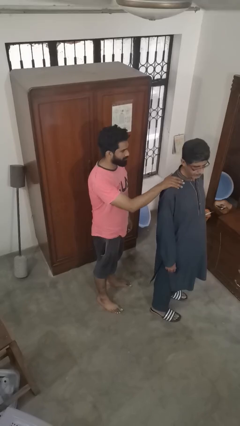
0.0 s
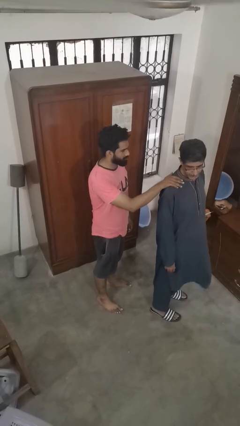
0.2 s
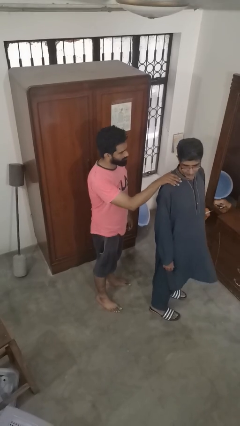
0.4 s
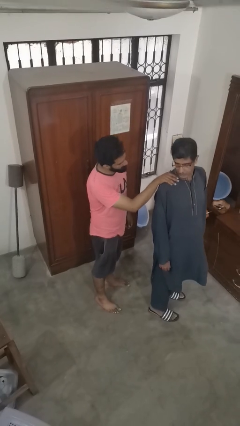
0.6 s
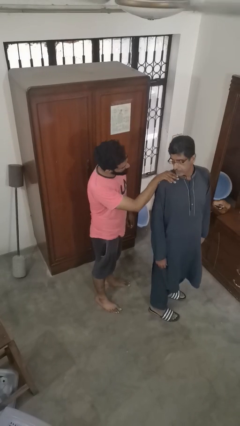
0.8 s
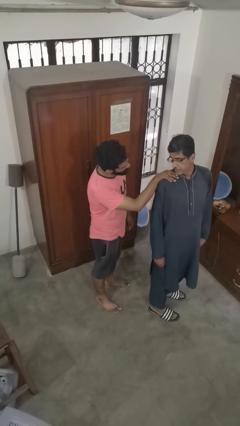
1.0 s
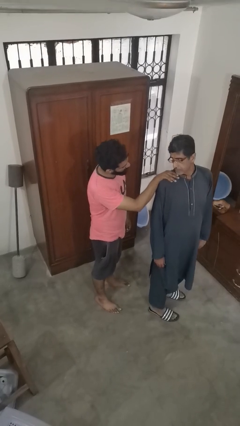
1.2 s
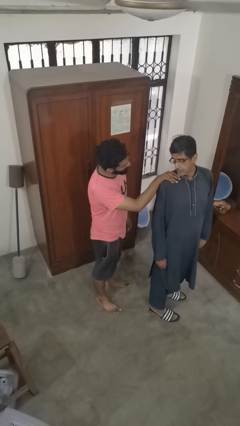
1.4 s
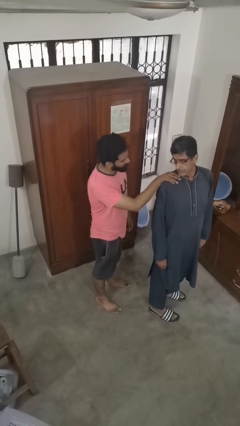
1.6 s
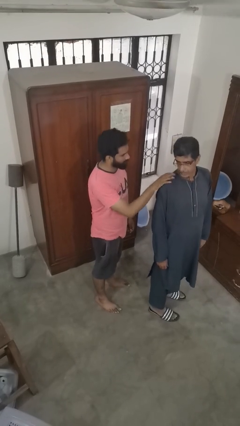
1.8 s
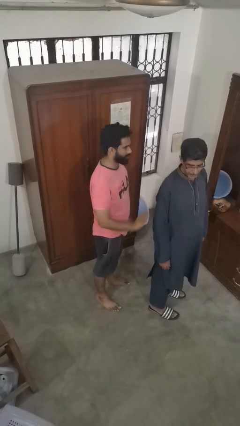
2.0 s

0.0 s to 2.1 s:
person spins person around

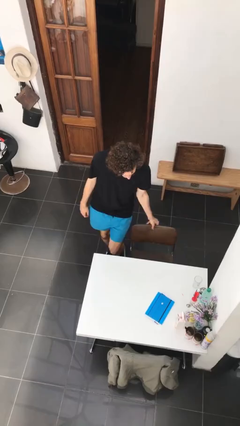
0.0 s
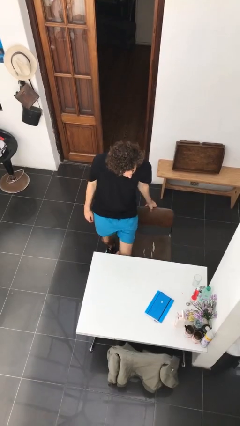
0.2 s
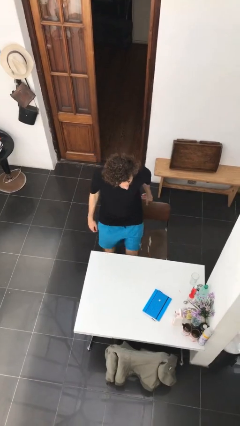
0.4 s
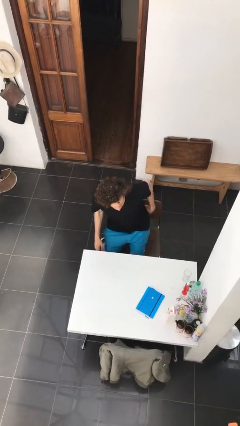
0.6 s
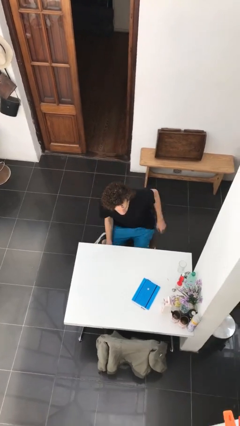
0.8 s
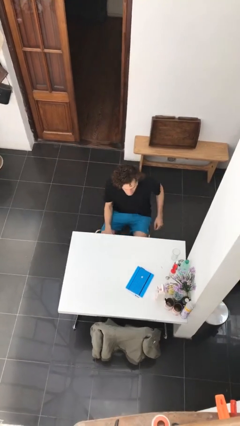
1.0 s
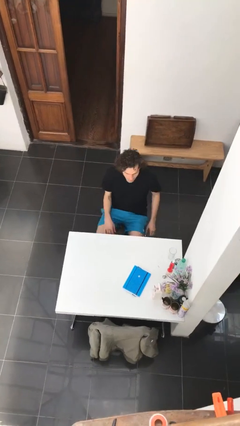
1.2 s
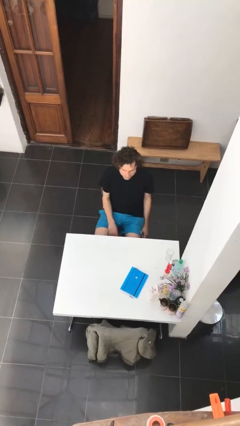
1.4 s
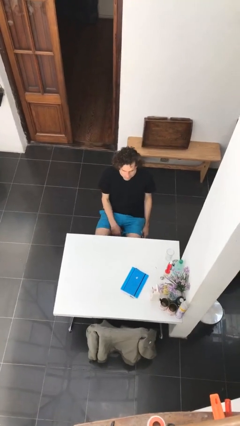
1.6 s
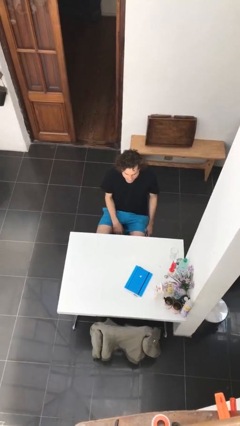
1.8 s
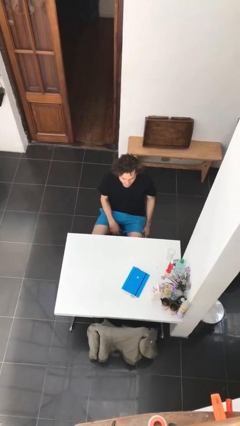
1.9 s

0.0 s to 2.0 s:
person sits down

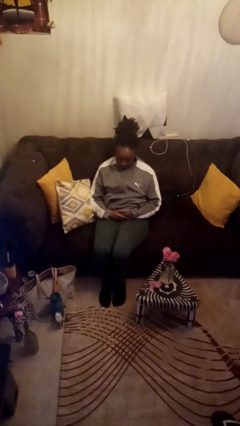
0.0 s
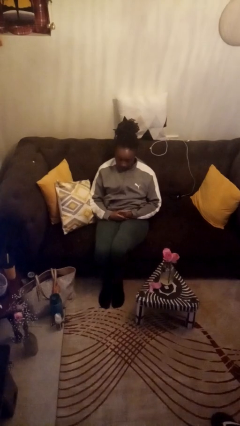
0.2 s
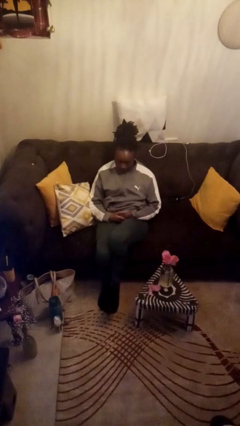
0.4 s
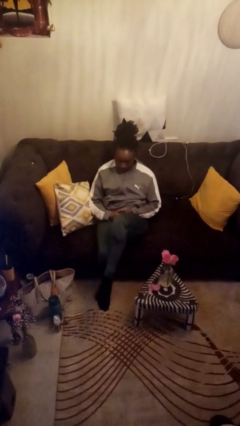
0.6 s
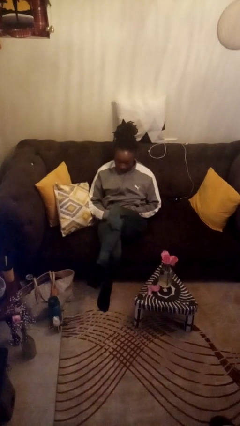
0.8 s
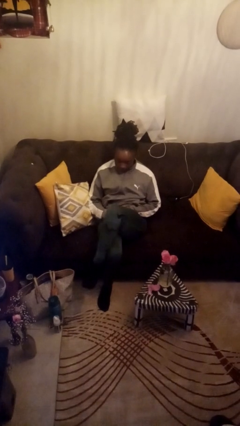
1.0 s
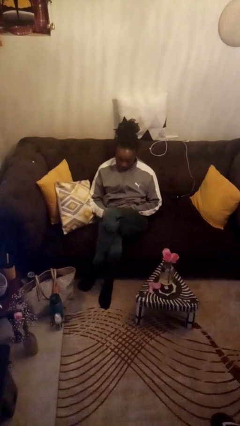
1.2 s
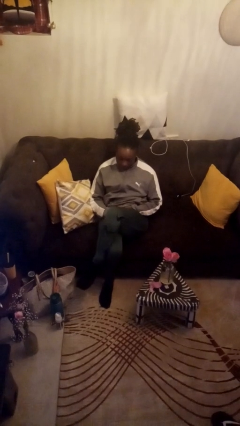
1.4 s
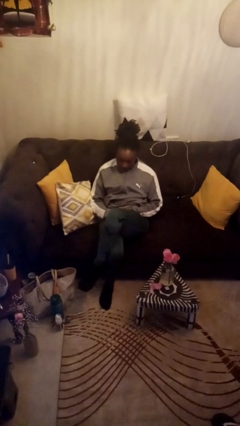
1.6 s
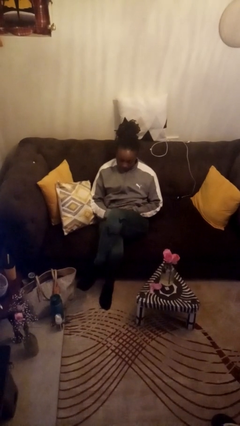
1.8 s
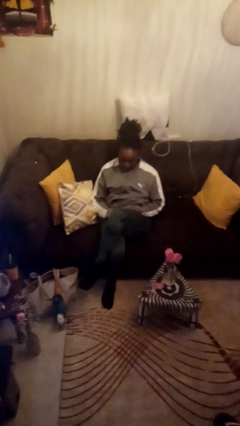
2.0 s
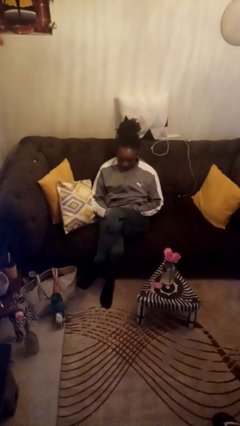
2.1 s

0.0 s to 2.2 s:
person crosses legs

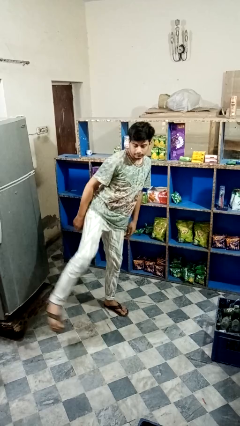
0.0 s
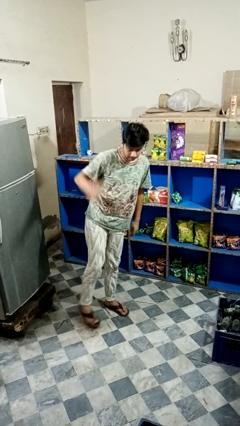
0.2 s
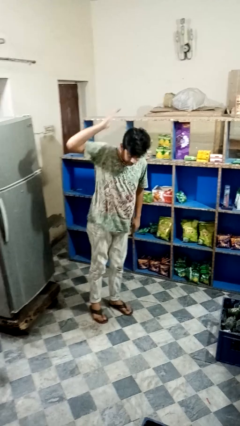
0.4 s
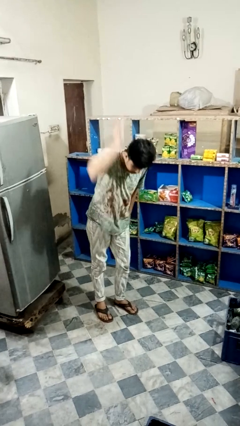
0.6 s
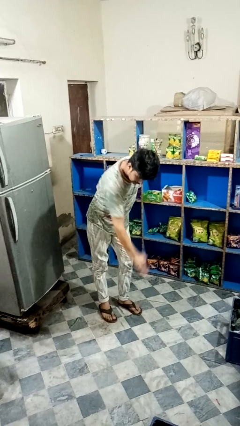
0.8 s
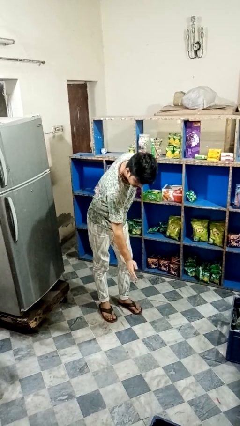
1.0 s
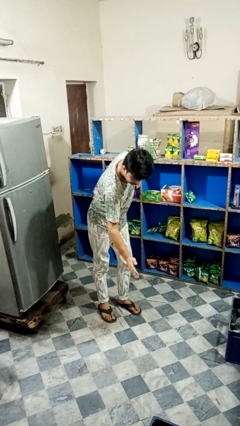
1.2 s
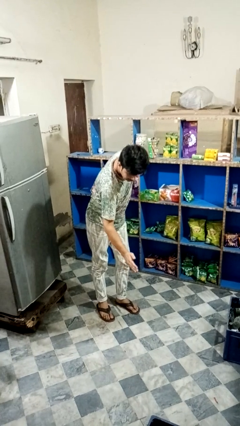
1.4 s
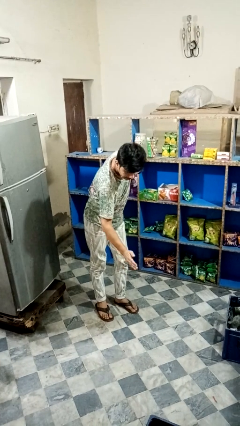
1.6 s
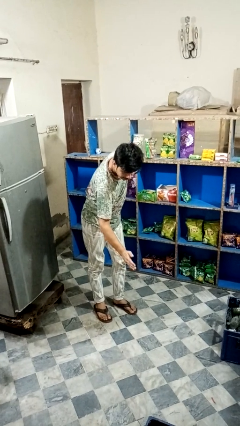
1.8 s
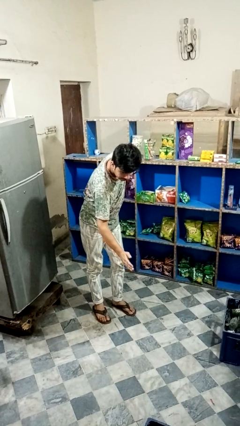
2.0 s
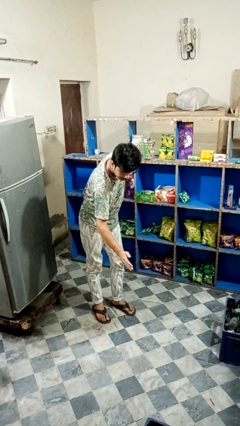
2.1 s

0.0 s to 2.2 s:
person karate chop

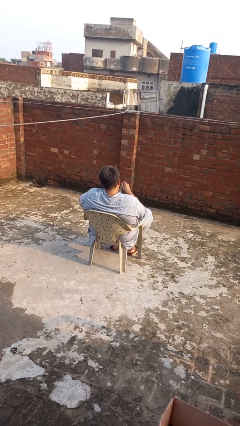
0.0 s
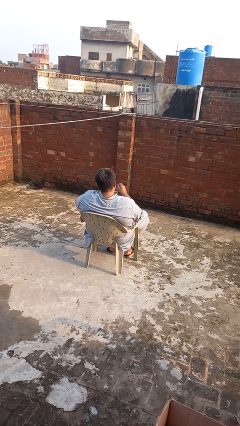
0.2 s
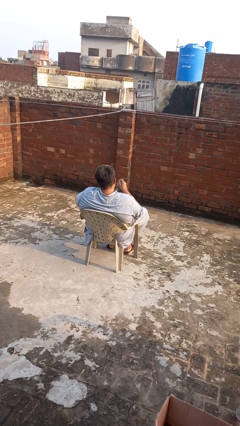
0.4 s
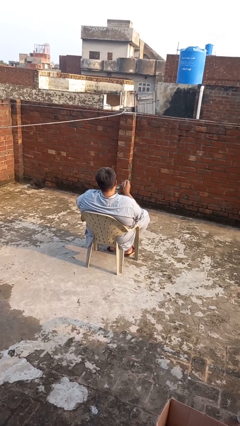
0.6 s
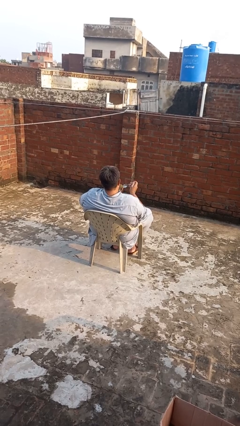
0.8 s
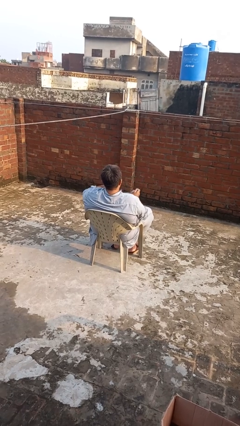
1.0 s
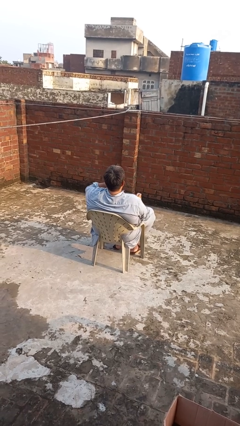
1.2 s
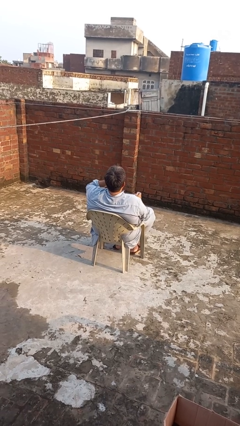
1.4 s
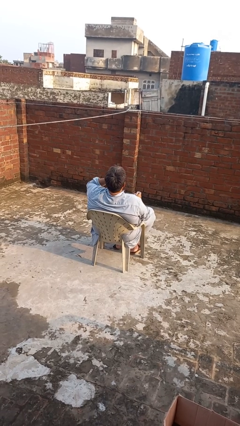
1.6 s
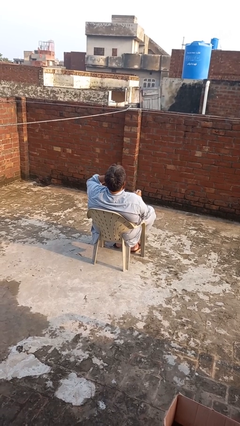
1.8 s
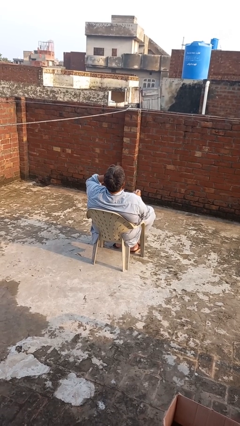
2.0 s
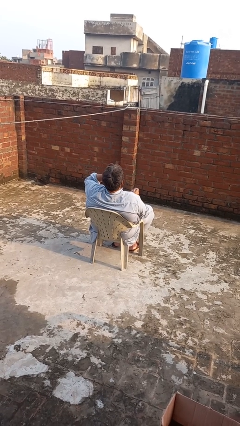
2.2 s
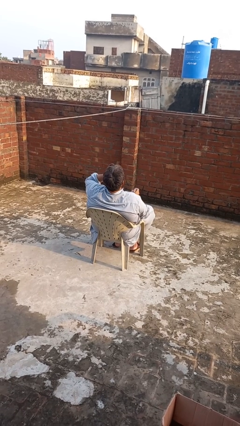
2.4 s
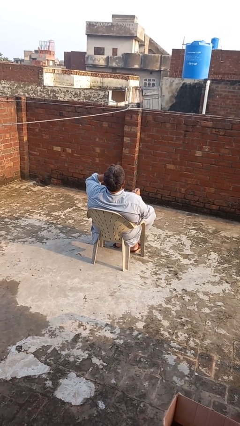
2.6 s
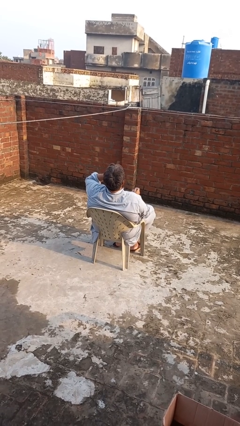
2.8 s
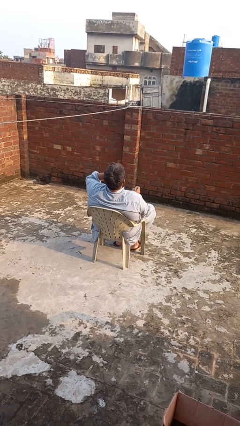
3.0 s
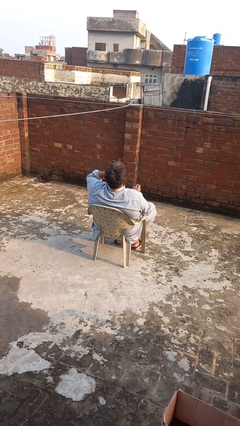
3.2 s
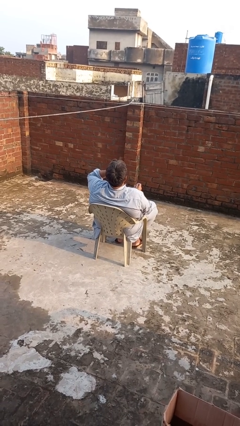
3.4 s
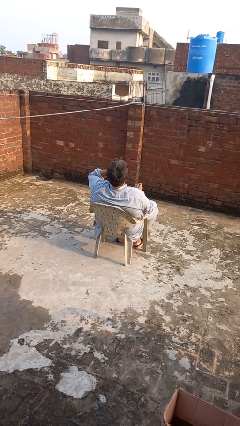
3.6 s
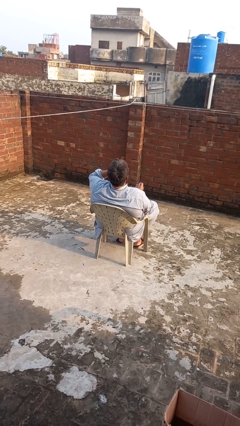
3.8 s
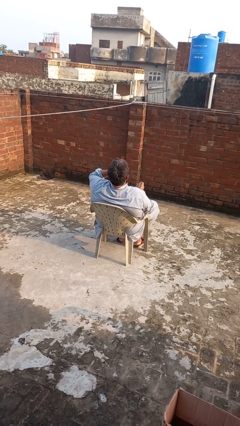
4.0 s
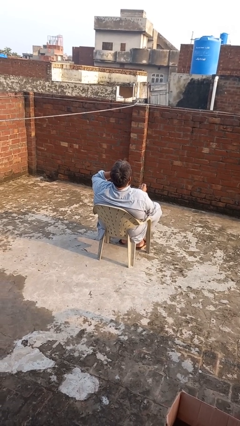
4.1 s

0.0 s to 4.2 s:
person drinks from mug

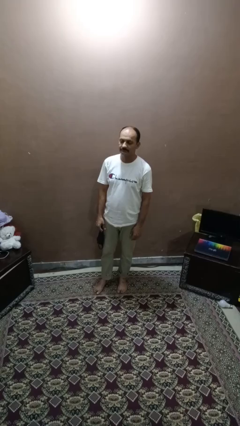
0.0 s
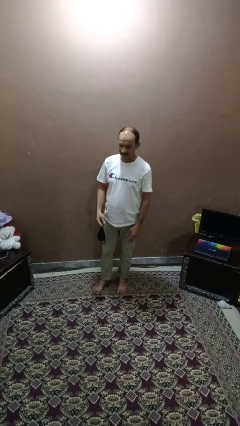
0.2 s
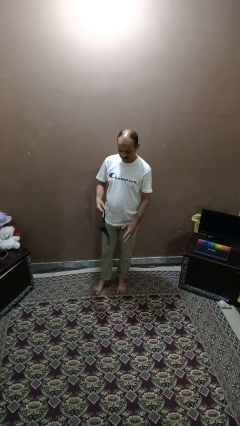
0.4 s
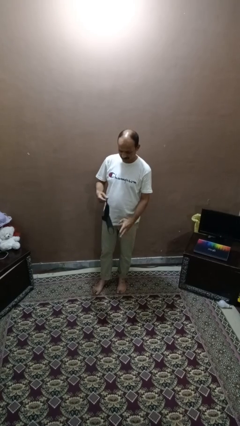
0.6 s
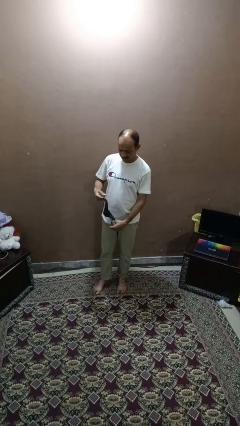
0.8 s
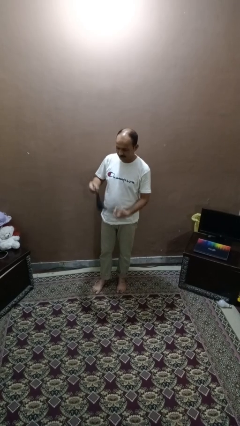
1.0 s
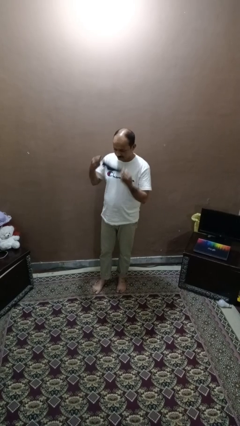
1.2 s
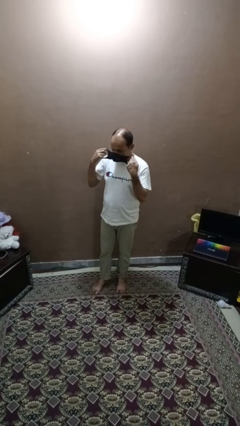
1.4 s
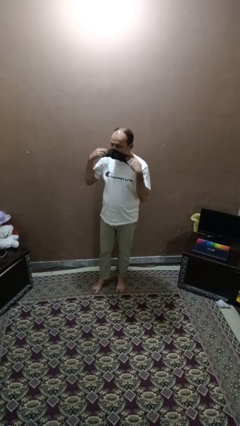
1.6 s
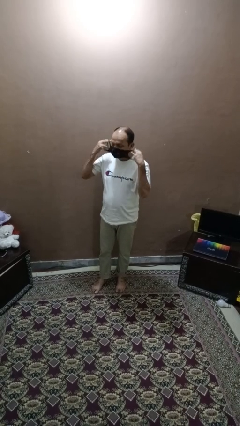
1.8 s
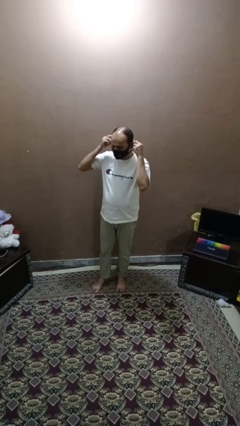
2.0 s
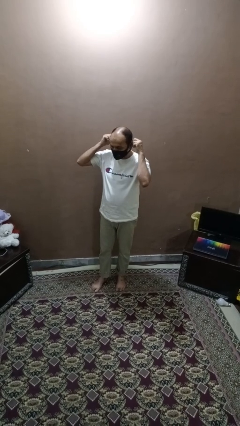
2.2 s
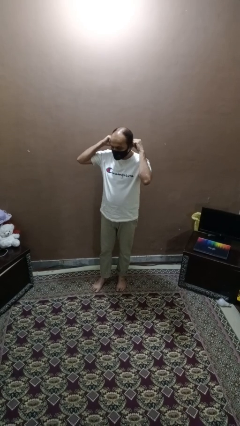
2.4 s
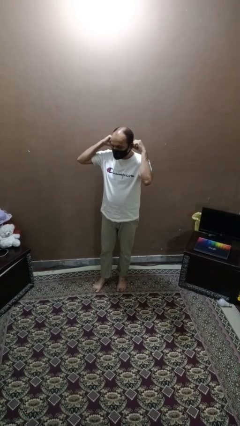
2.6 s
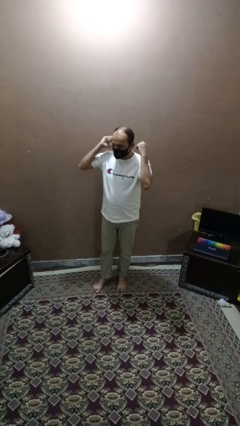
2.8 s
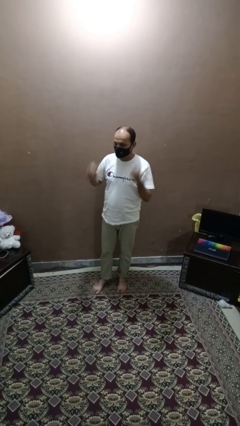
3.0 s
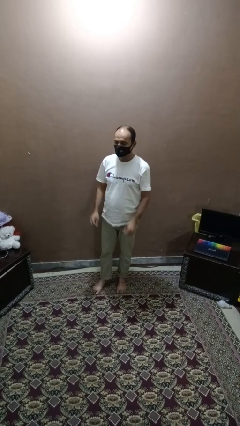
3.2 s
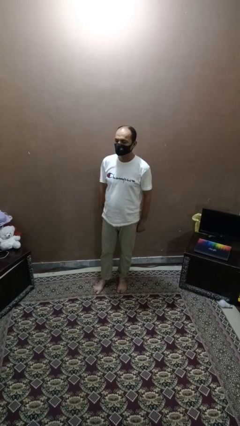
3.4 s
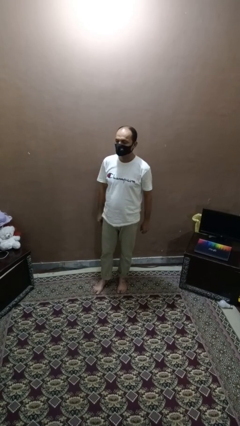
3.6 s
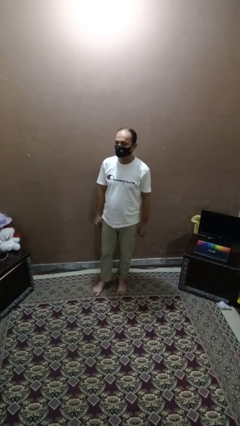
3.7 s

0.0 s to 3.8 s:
person puts on facemask

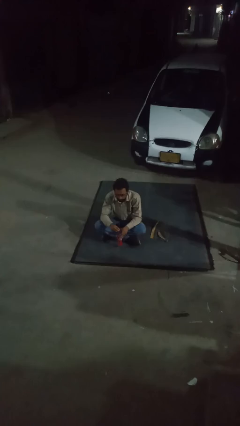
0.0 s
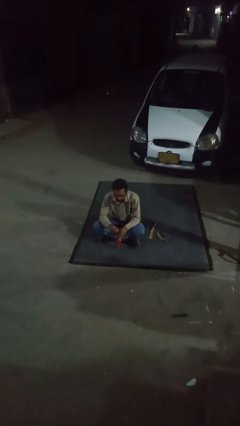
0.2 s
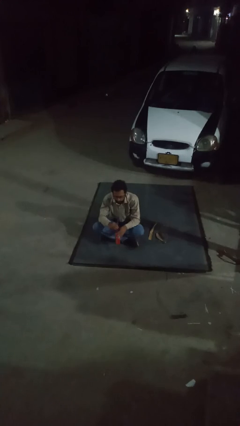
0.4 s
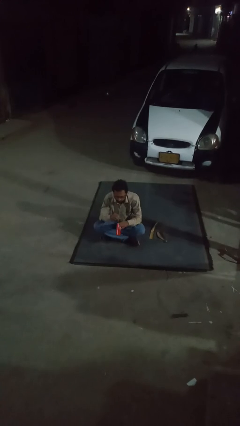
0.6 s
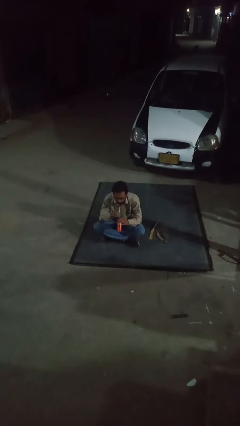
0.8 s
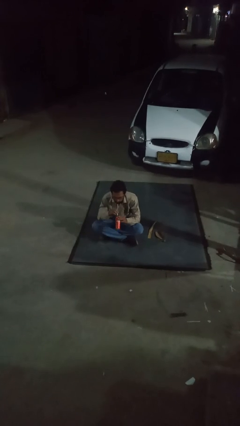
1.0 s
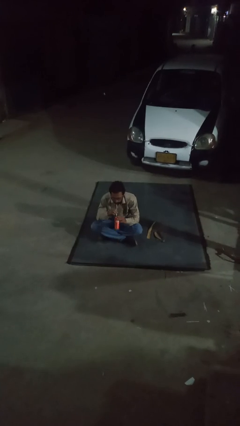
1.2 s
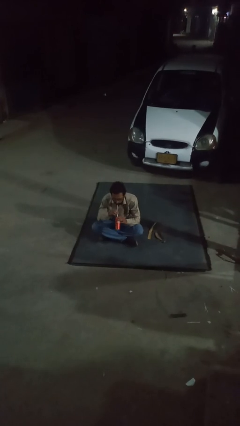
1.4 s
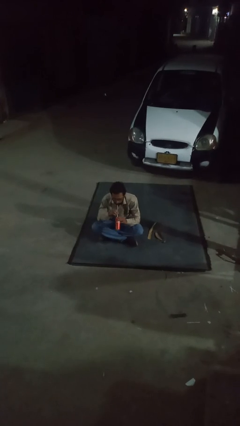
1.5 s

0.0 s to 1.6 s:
person drinks from straw
